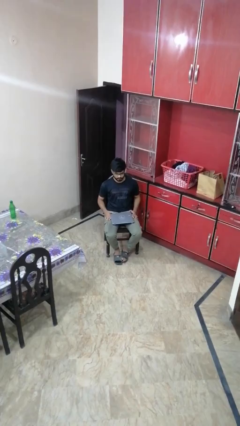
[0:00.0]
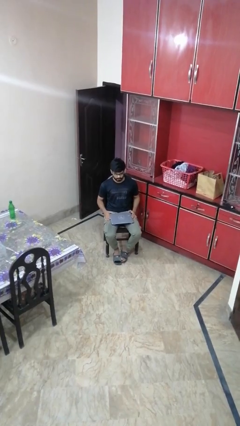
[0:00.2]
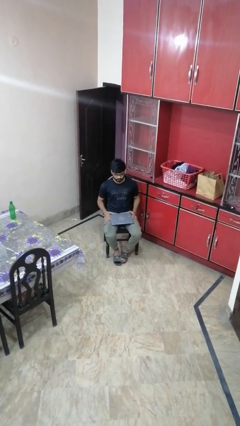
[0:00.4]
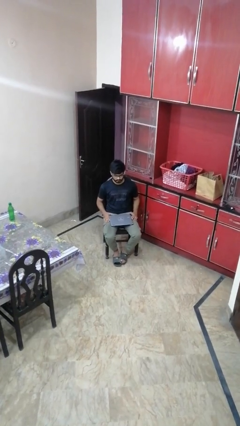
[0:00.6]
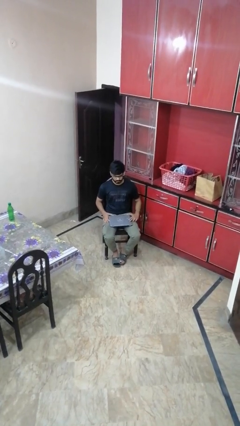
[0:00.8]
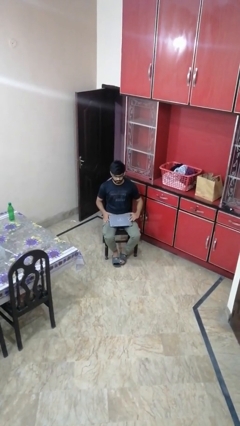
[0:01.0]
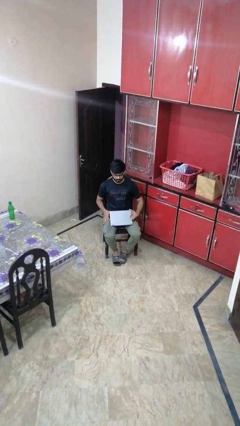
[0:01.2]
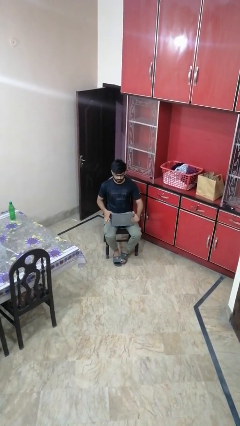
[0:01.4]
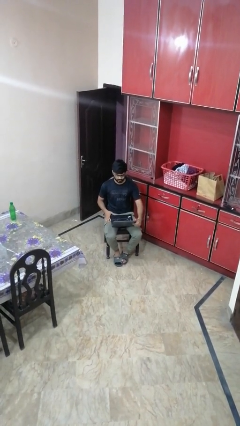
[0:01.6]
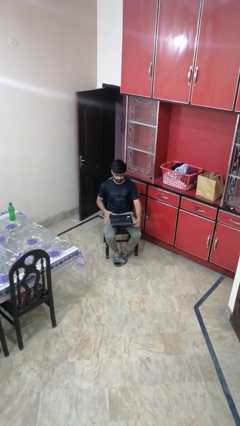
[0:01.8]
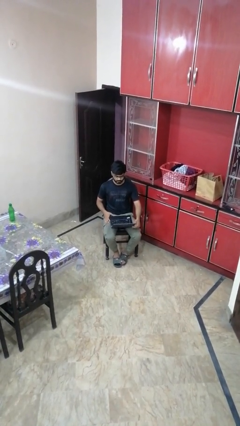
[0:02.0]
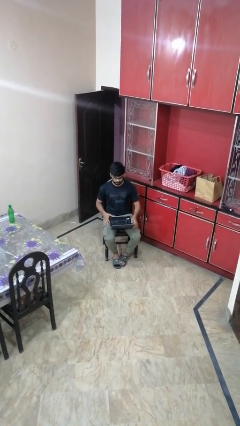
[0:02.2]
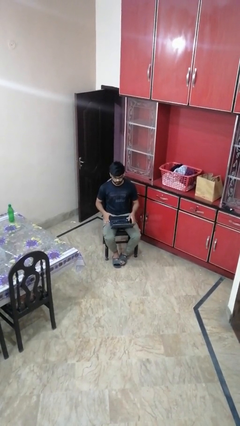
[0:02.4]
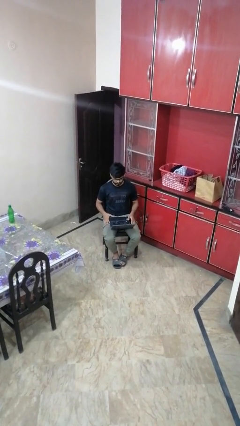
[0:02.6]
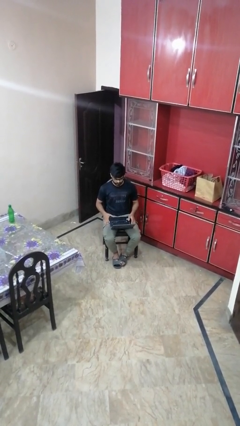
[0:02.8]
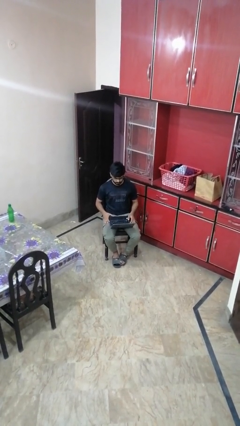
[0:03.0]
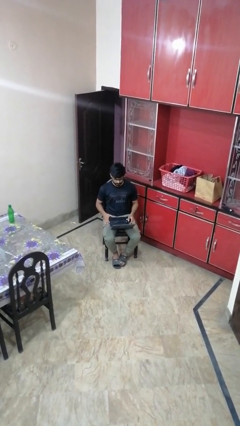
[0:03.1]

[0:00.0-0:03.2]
person opens laptop

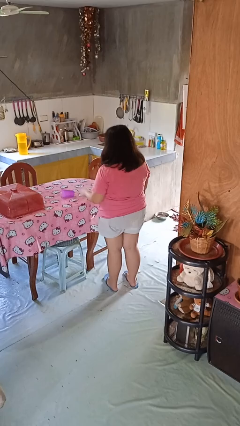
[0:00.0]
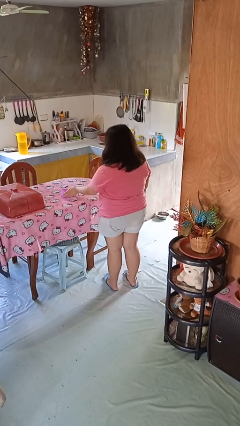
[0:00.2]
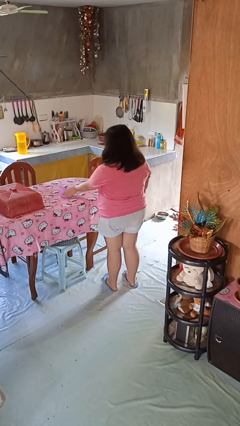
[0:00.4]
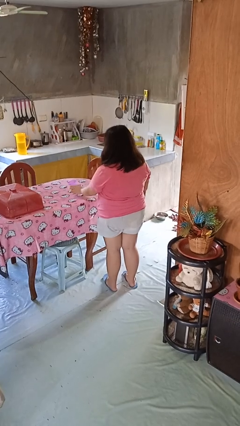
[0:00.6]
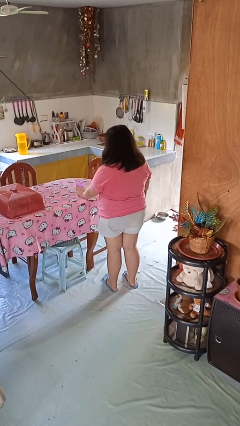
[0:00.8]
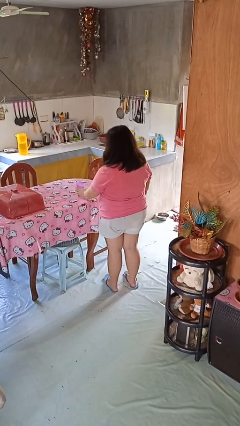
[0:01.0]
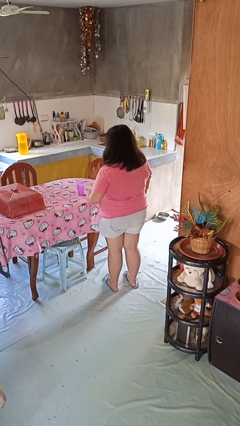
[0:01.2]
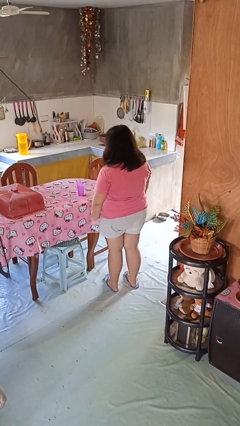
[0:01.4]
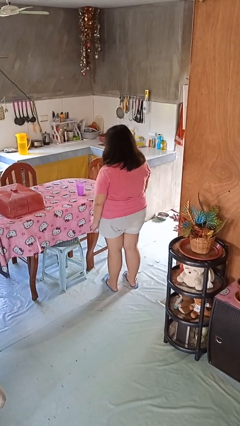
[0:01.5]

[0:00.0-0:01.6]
person sets upright glass

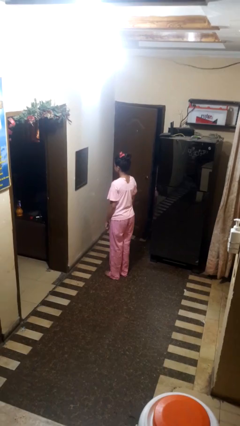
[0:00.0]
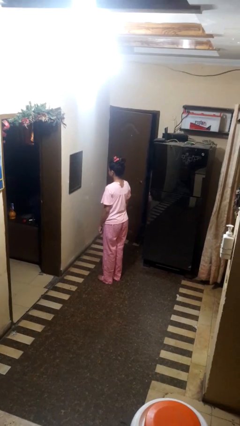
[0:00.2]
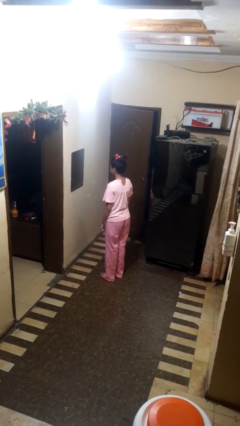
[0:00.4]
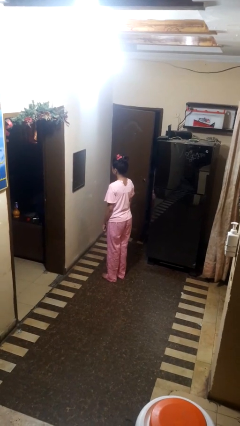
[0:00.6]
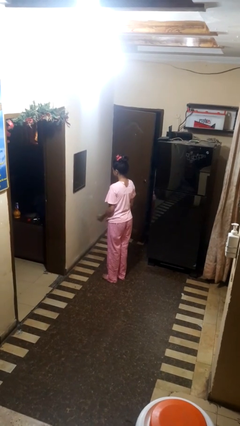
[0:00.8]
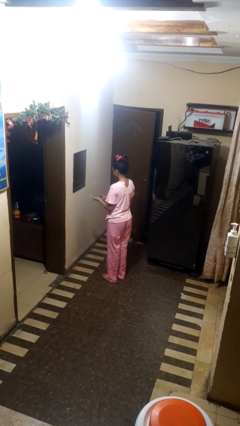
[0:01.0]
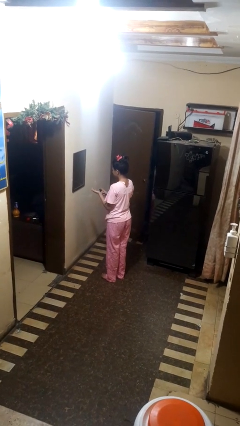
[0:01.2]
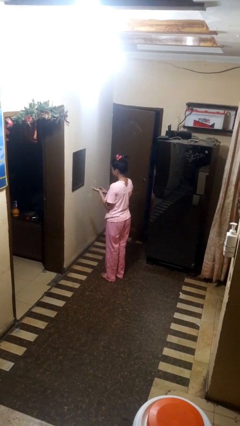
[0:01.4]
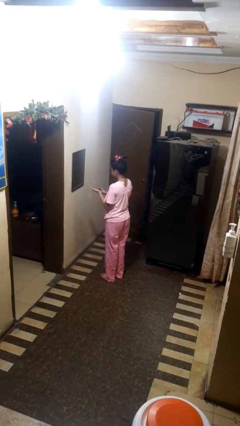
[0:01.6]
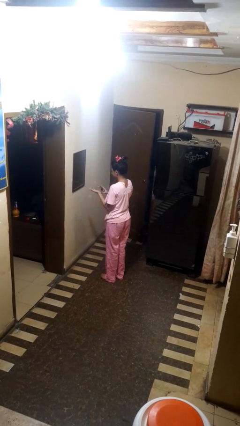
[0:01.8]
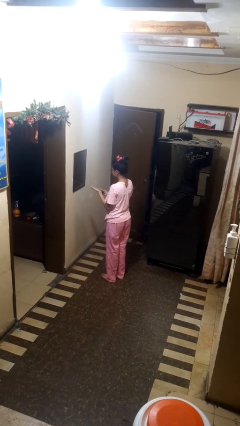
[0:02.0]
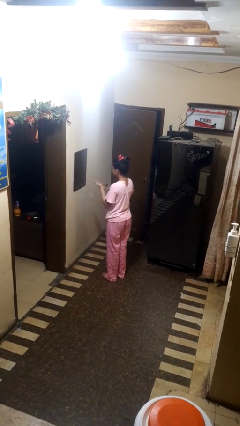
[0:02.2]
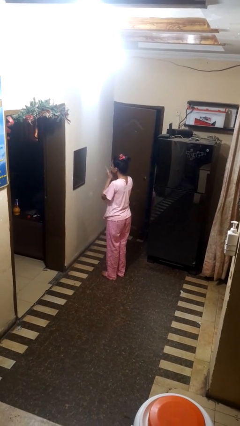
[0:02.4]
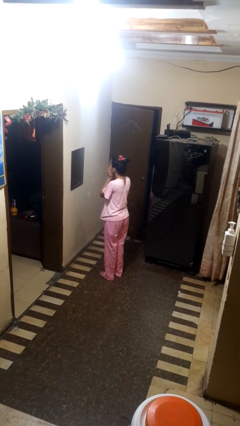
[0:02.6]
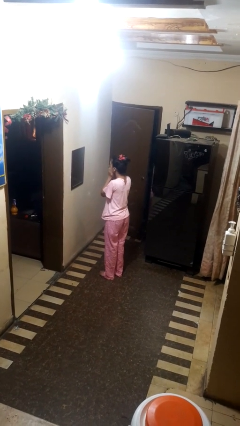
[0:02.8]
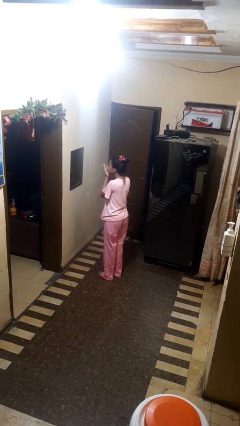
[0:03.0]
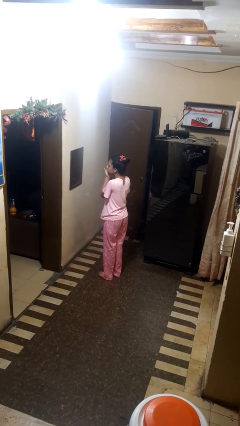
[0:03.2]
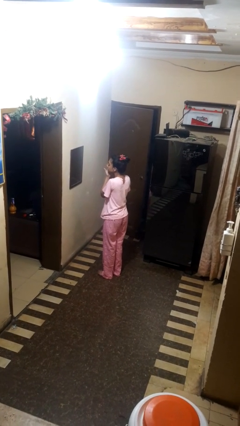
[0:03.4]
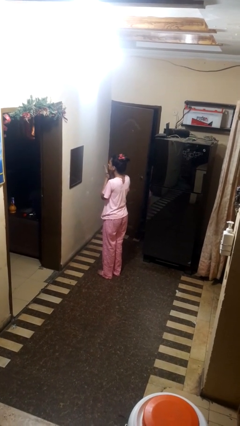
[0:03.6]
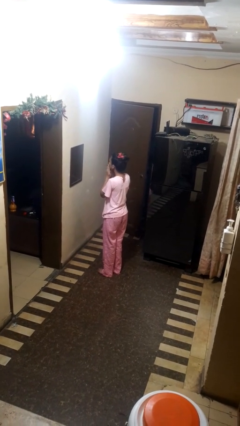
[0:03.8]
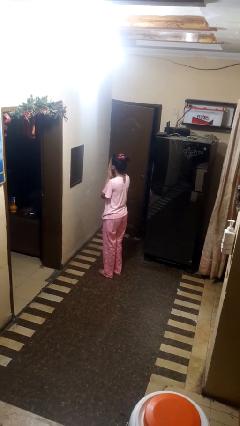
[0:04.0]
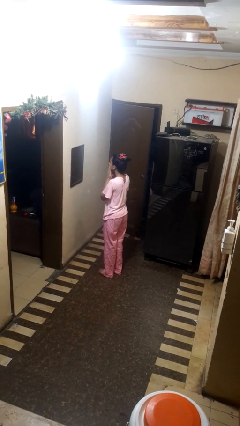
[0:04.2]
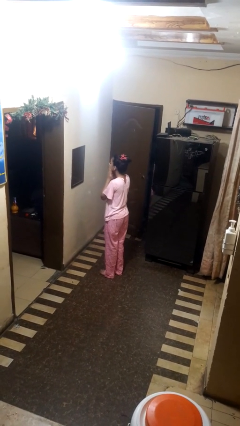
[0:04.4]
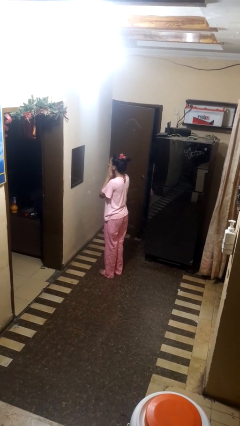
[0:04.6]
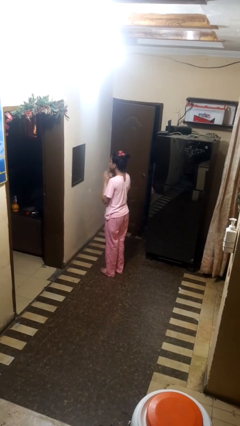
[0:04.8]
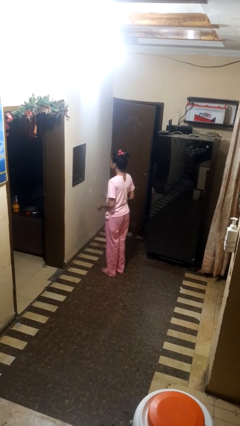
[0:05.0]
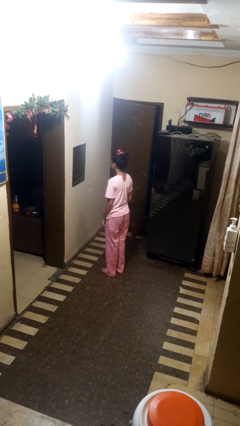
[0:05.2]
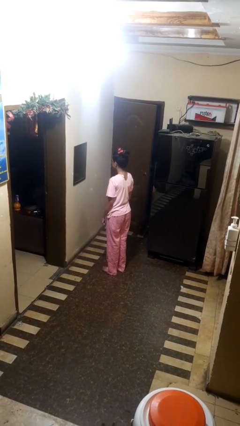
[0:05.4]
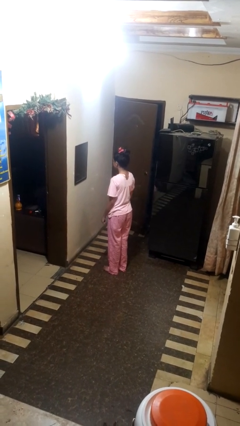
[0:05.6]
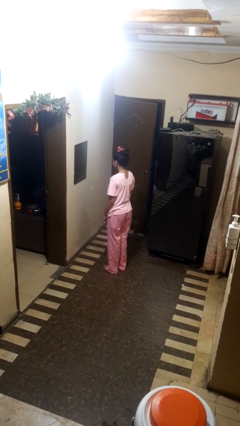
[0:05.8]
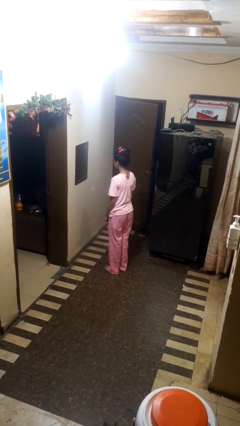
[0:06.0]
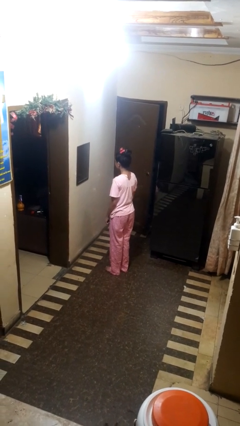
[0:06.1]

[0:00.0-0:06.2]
person applies foundation makeup

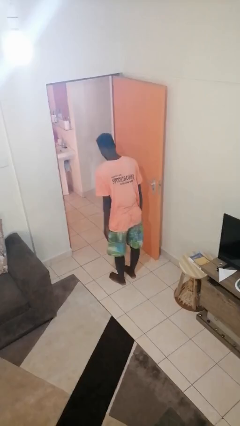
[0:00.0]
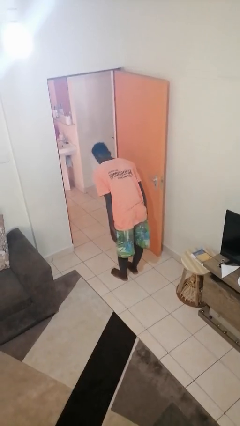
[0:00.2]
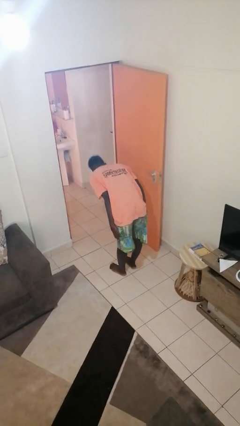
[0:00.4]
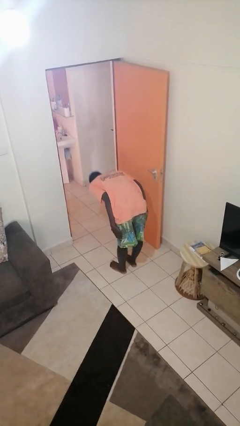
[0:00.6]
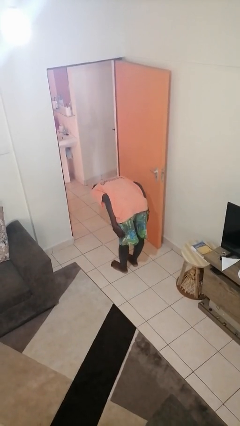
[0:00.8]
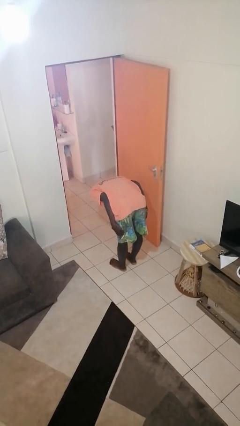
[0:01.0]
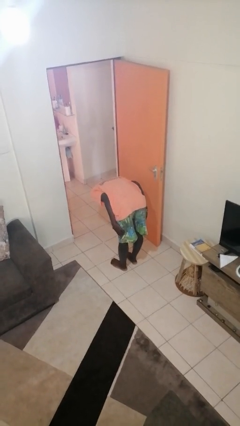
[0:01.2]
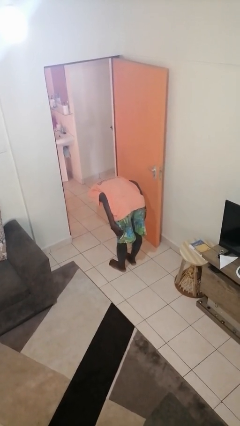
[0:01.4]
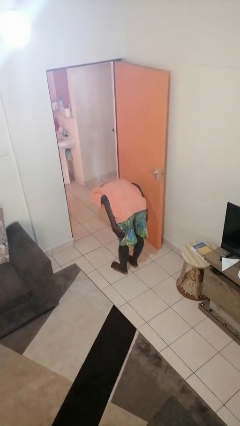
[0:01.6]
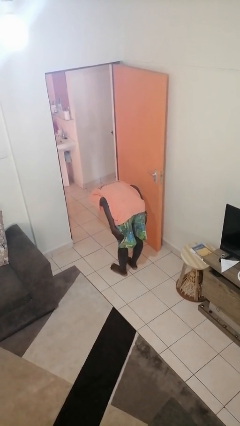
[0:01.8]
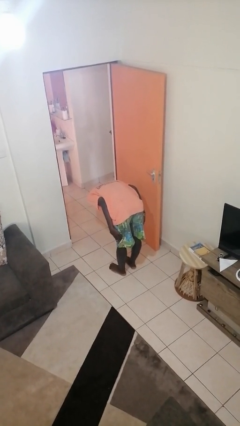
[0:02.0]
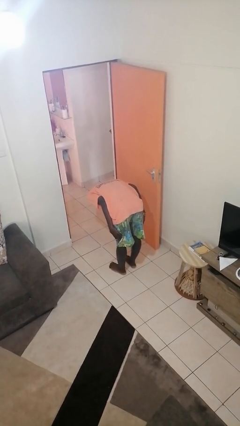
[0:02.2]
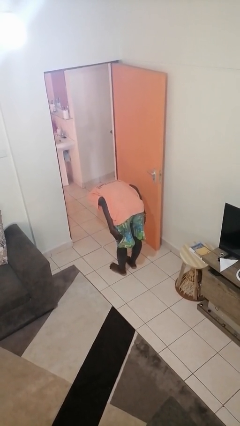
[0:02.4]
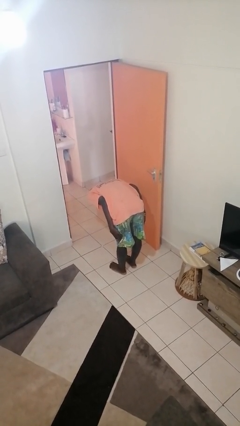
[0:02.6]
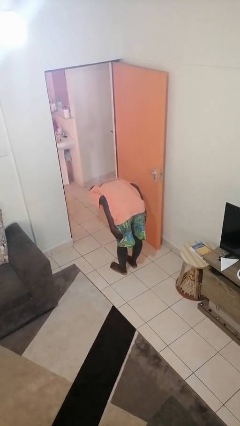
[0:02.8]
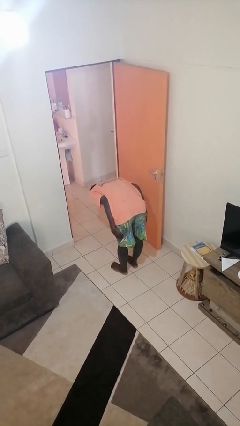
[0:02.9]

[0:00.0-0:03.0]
person bows

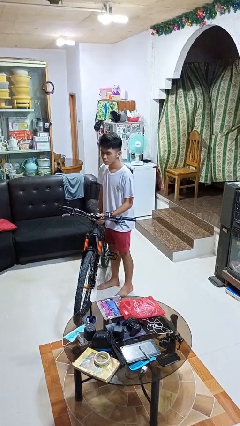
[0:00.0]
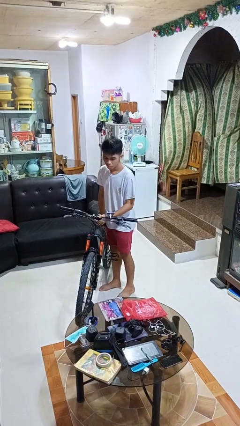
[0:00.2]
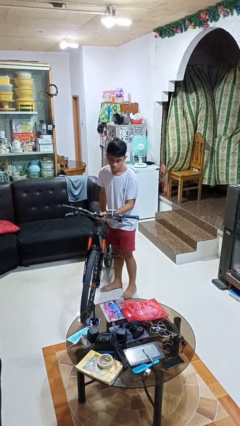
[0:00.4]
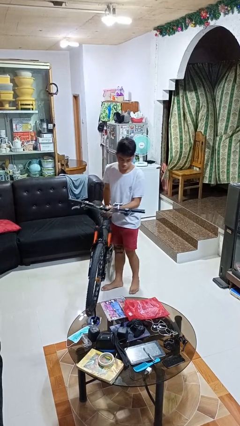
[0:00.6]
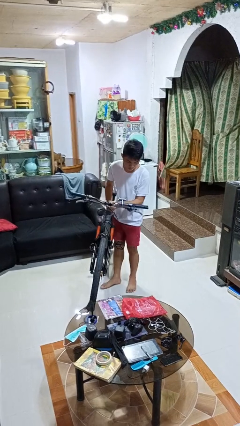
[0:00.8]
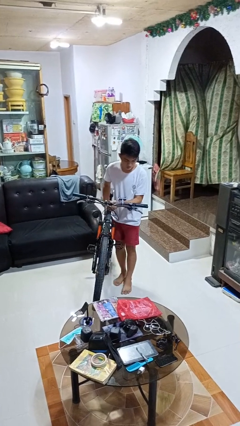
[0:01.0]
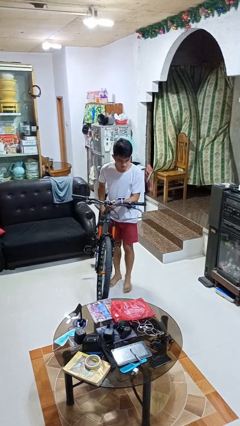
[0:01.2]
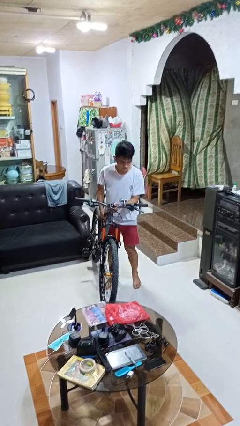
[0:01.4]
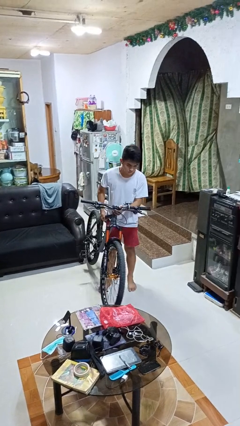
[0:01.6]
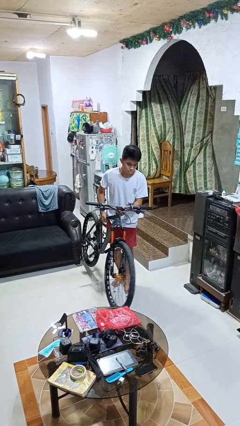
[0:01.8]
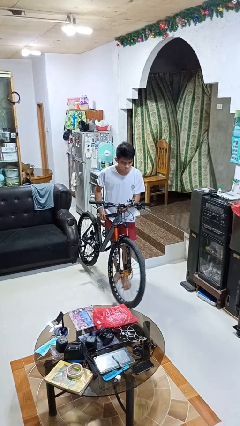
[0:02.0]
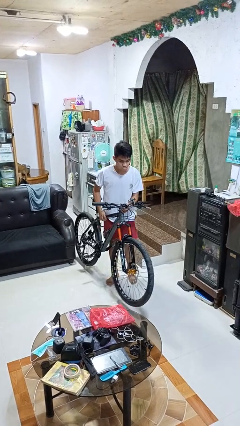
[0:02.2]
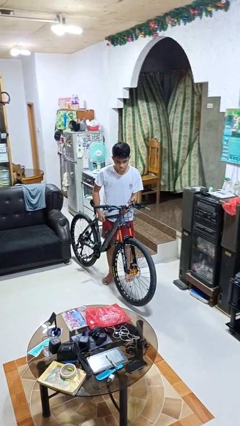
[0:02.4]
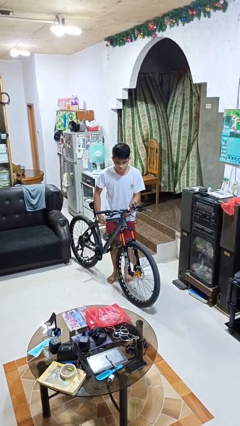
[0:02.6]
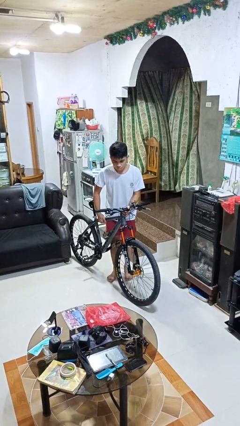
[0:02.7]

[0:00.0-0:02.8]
person carries bicycle

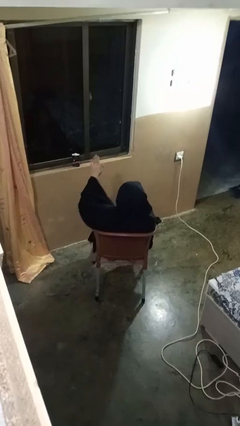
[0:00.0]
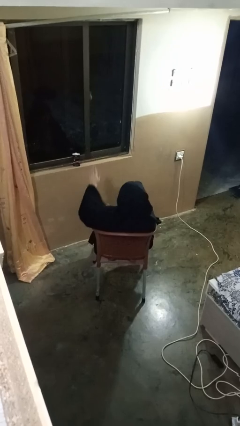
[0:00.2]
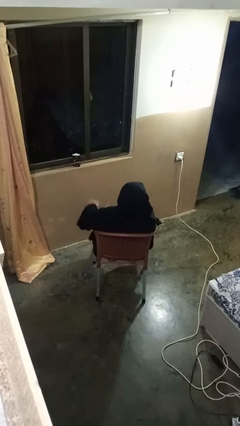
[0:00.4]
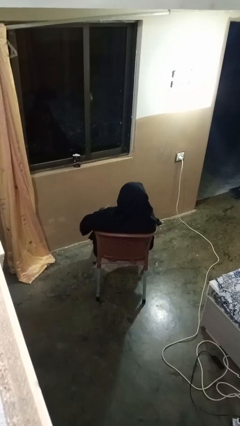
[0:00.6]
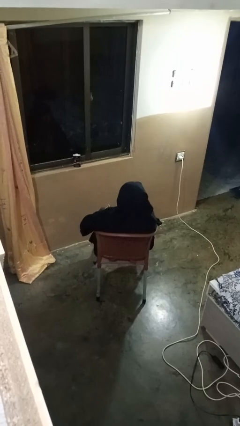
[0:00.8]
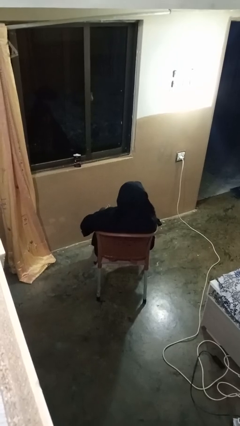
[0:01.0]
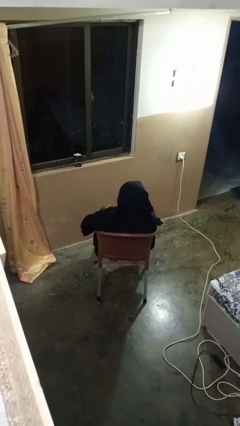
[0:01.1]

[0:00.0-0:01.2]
person gestures lower hand
